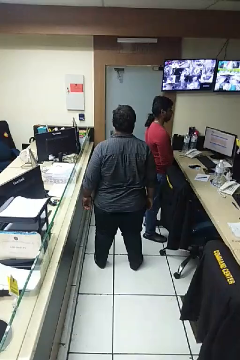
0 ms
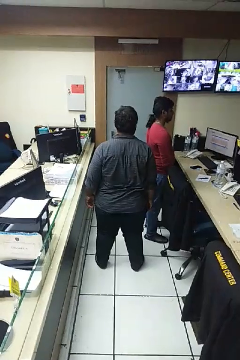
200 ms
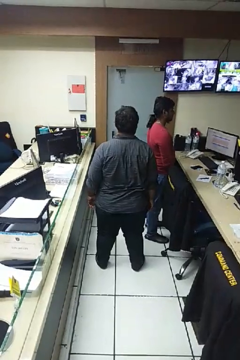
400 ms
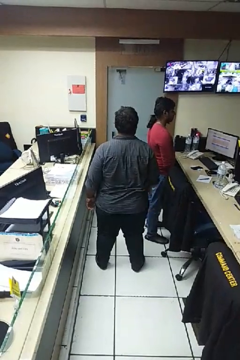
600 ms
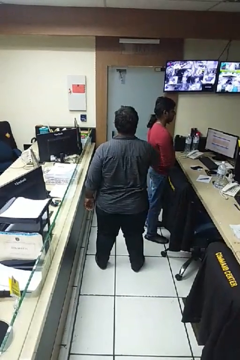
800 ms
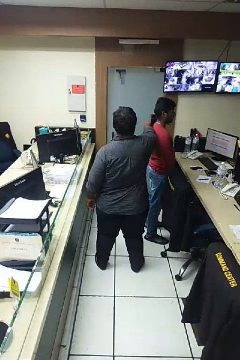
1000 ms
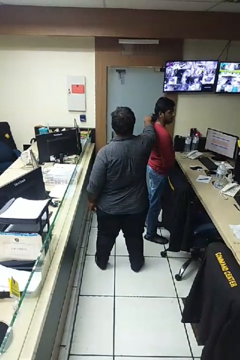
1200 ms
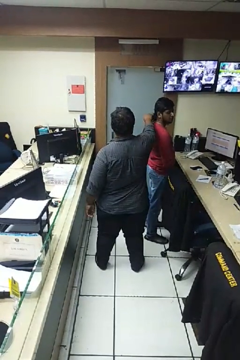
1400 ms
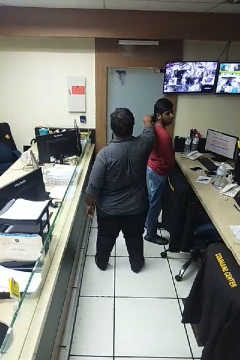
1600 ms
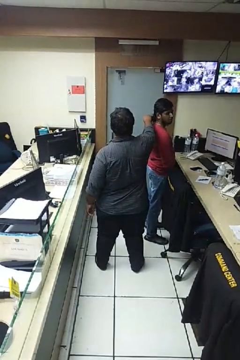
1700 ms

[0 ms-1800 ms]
person grabs person by hair

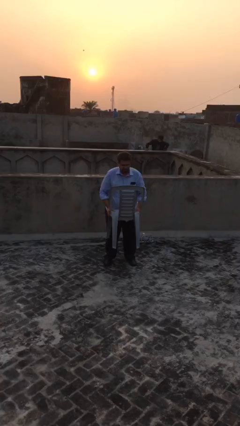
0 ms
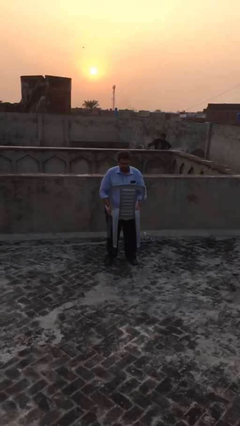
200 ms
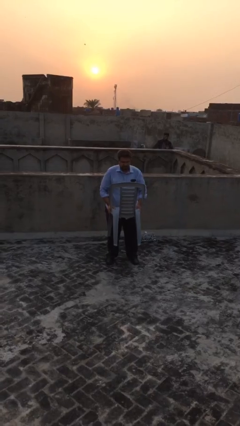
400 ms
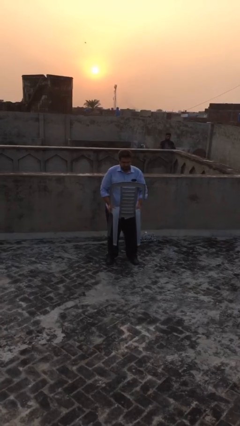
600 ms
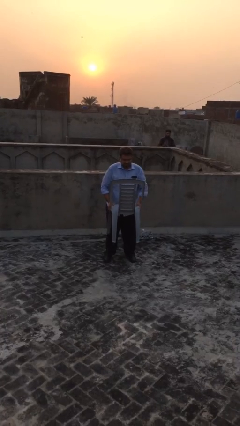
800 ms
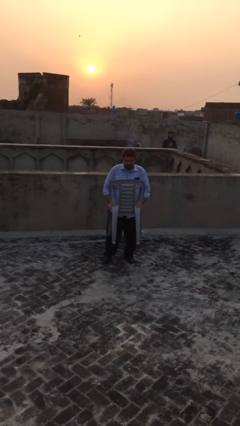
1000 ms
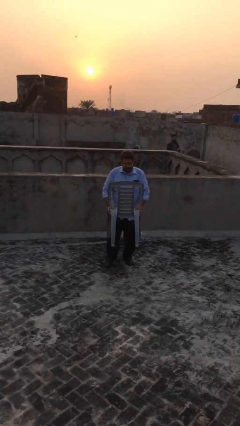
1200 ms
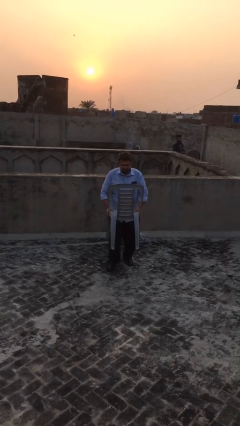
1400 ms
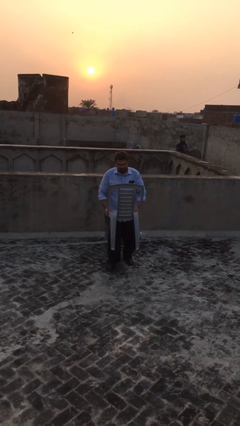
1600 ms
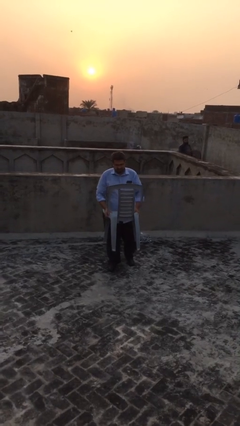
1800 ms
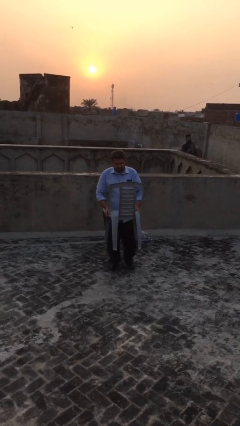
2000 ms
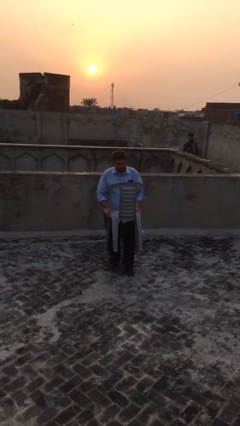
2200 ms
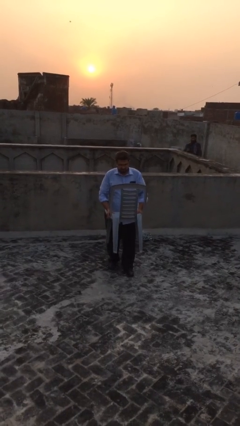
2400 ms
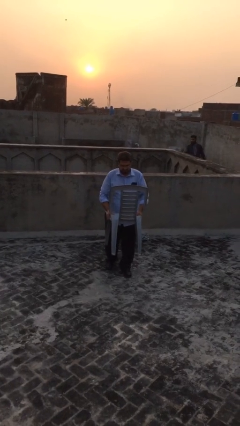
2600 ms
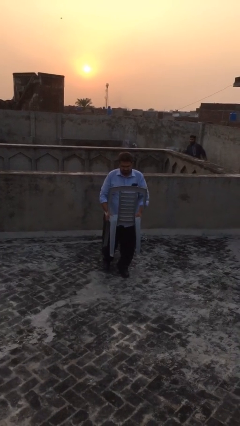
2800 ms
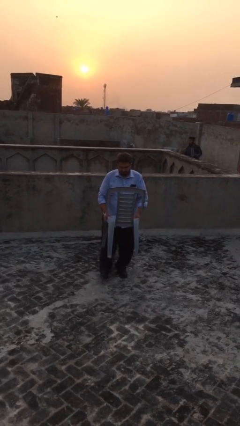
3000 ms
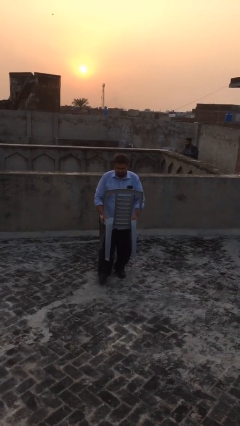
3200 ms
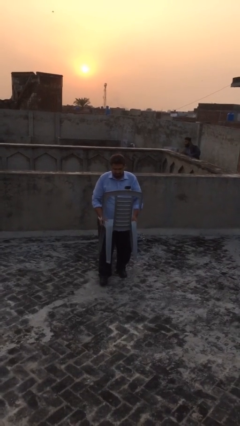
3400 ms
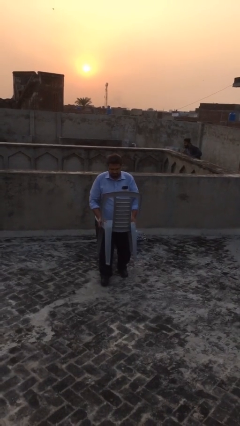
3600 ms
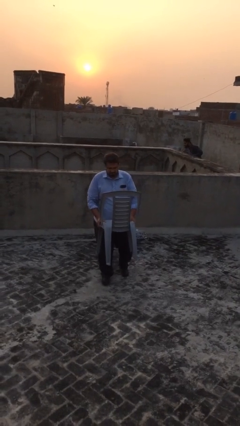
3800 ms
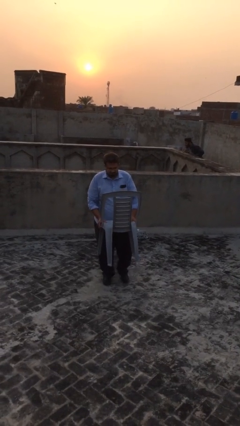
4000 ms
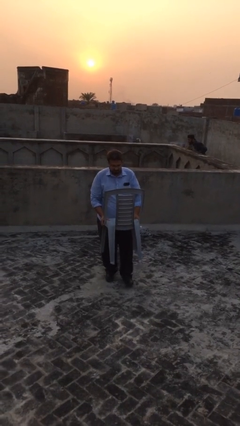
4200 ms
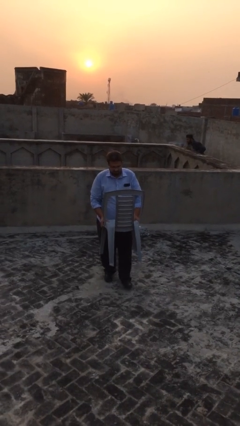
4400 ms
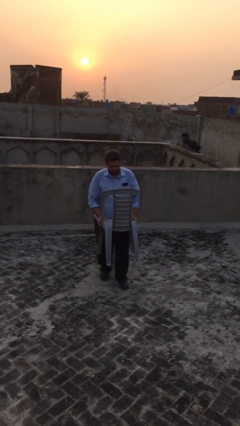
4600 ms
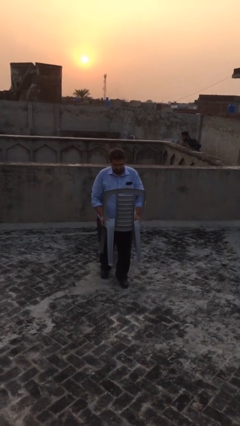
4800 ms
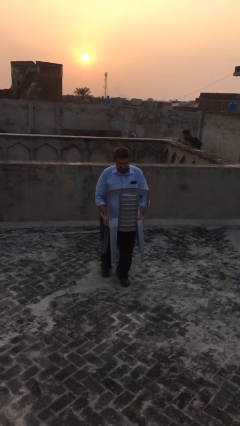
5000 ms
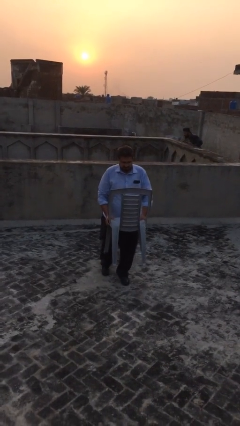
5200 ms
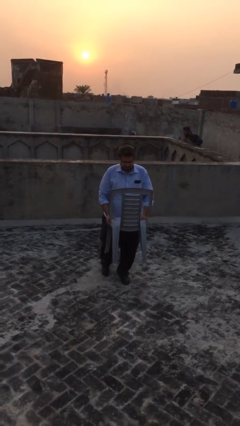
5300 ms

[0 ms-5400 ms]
person carries heavy object

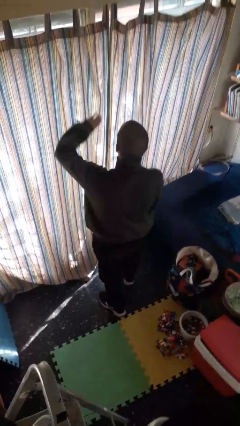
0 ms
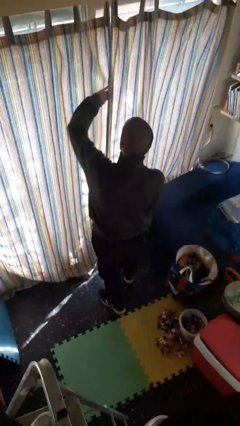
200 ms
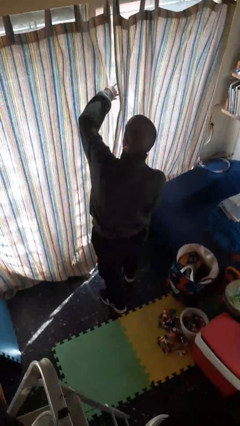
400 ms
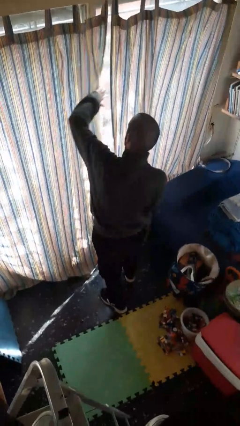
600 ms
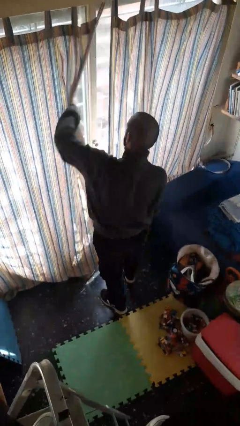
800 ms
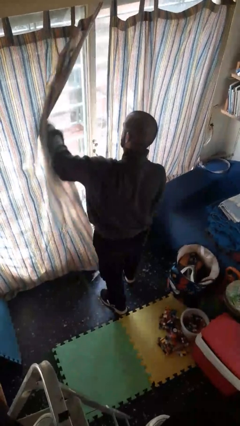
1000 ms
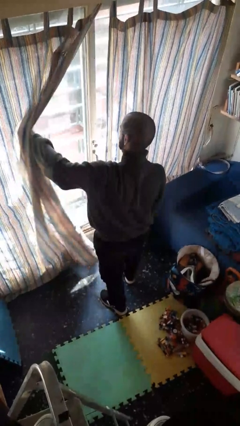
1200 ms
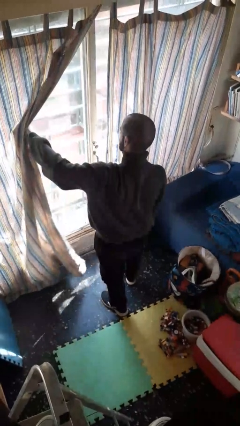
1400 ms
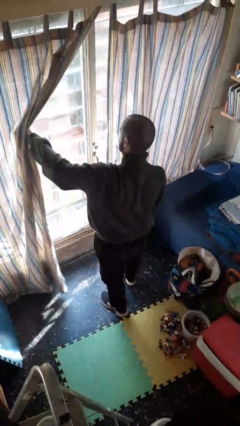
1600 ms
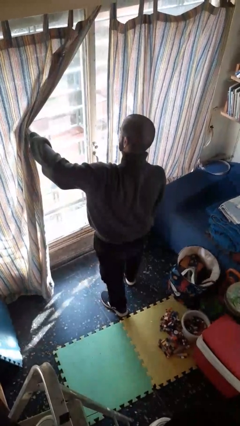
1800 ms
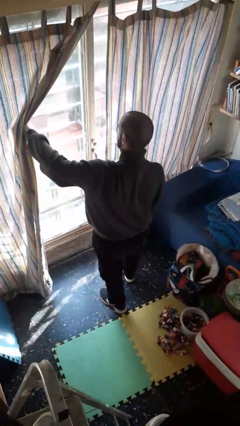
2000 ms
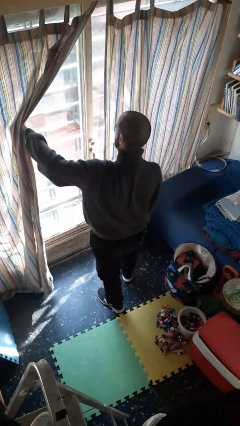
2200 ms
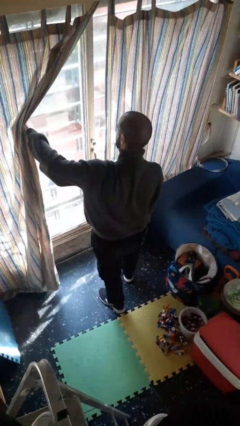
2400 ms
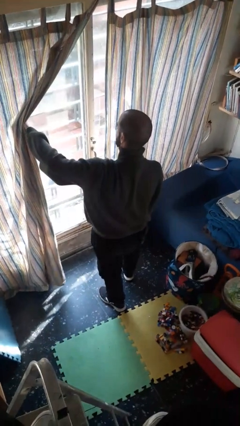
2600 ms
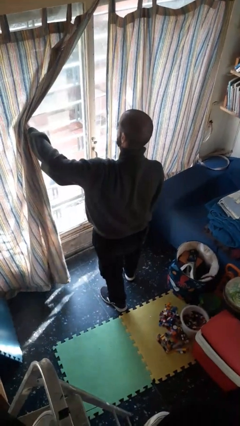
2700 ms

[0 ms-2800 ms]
person opens curtains

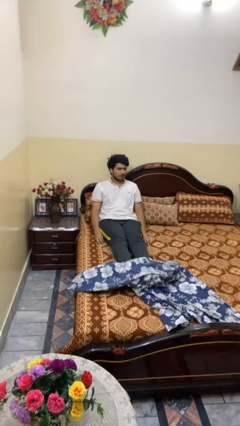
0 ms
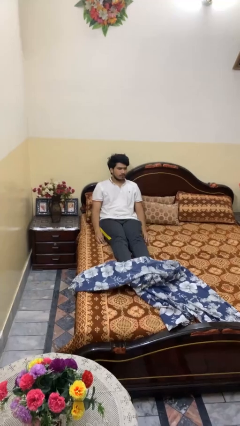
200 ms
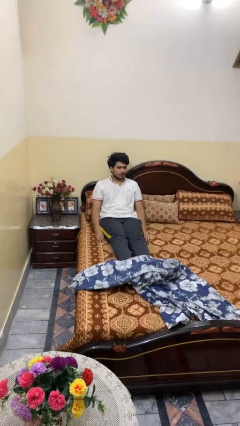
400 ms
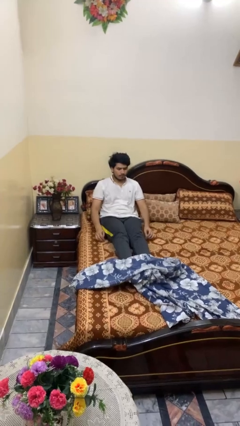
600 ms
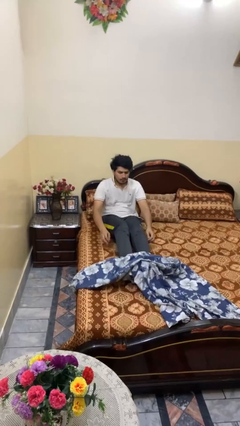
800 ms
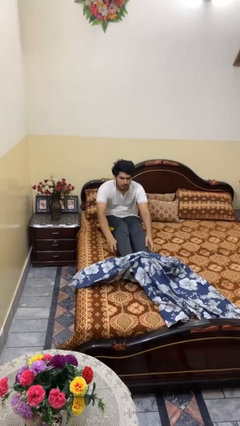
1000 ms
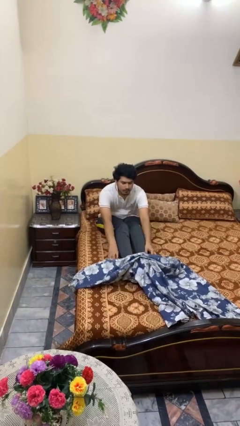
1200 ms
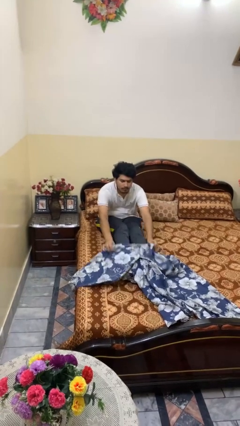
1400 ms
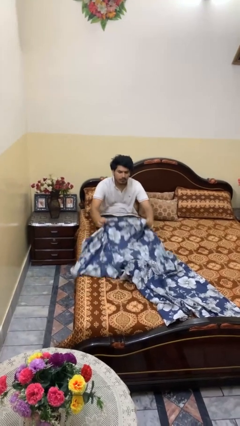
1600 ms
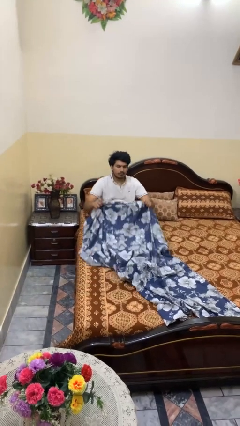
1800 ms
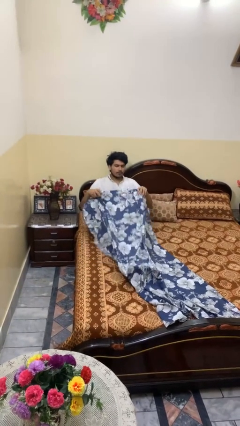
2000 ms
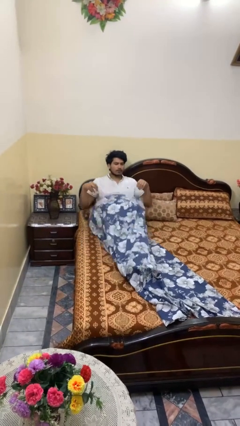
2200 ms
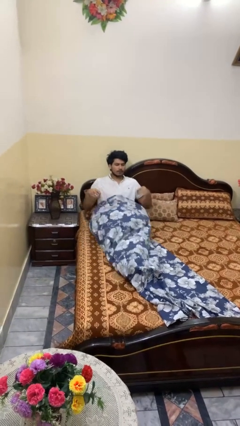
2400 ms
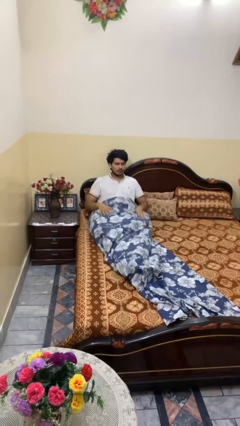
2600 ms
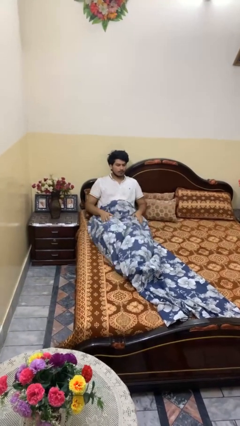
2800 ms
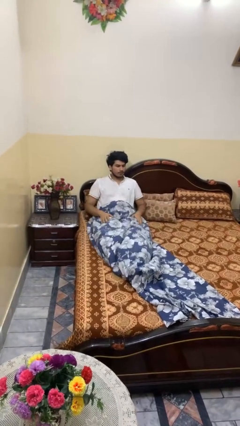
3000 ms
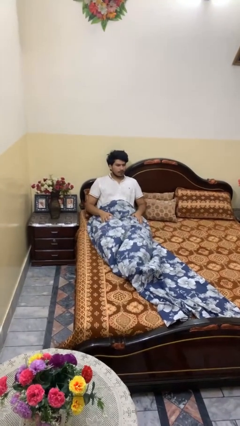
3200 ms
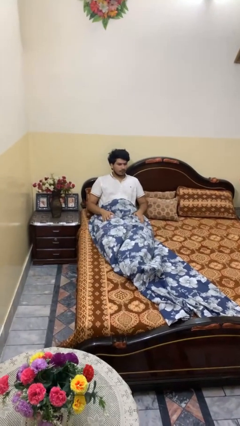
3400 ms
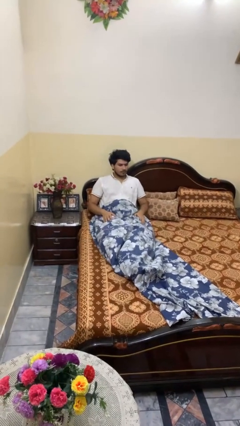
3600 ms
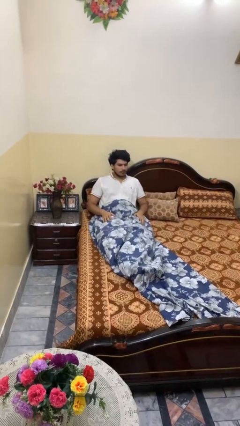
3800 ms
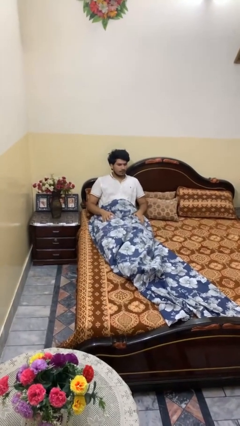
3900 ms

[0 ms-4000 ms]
person covers with bedsheets

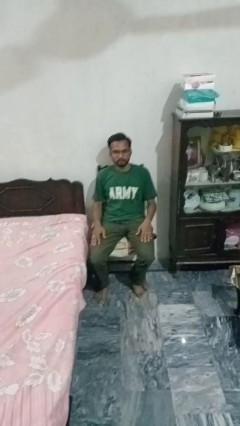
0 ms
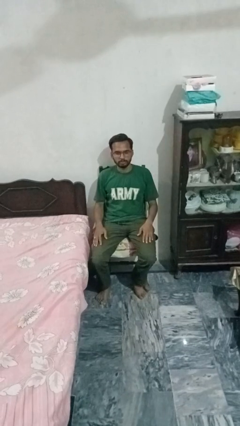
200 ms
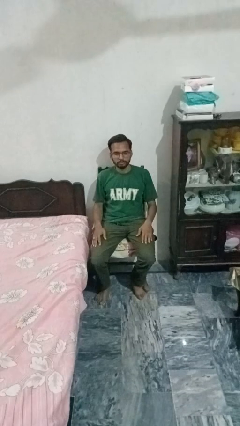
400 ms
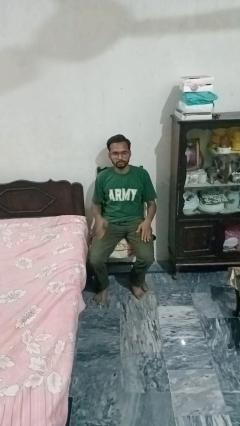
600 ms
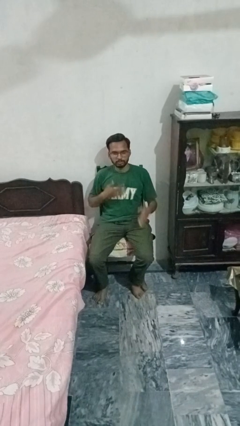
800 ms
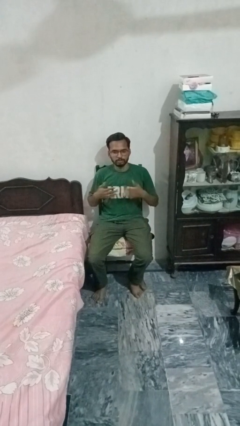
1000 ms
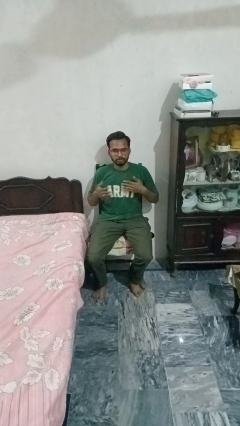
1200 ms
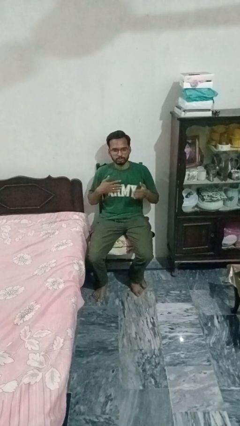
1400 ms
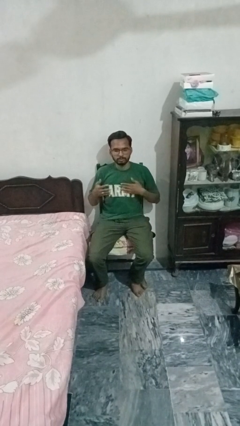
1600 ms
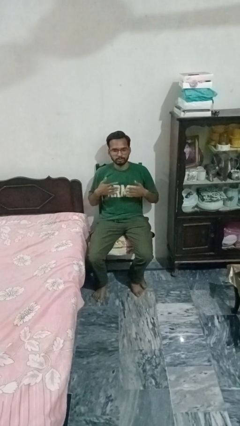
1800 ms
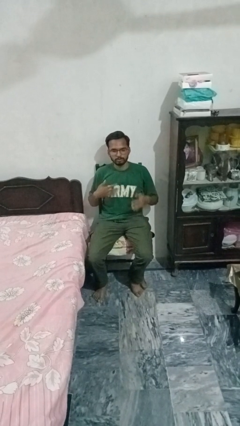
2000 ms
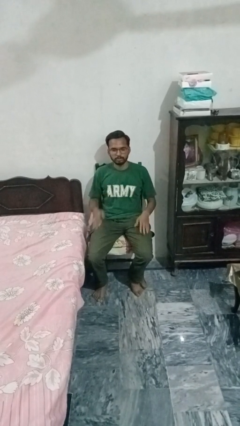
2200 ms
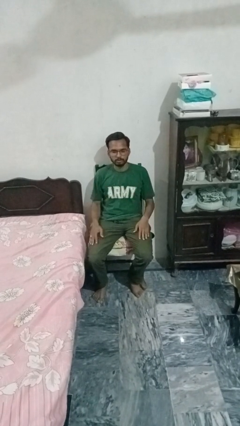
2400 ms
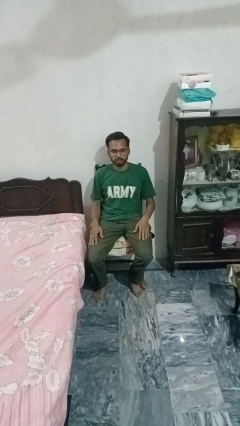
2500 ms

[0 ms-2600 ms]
person drums on chest

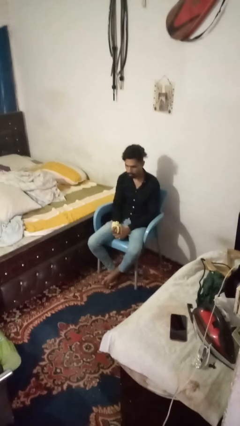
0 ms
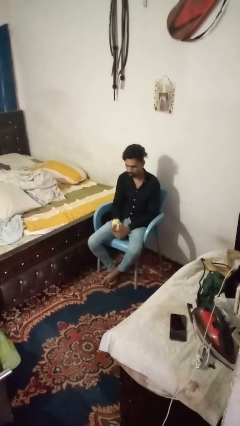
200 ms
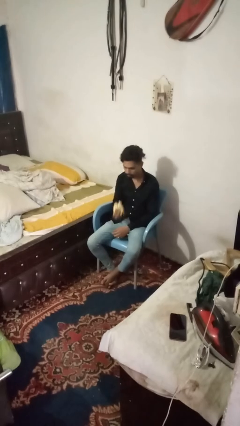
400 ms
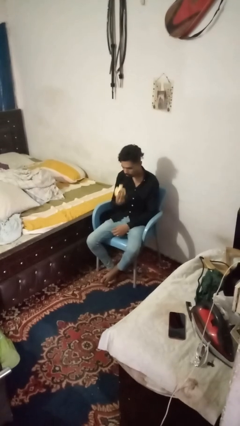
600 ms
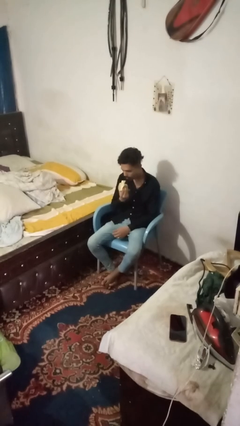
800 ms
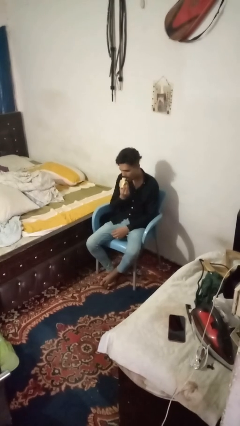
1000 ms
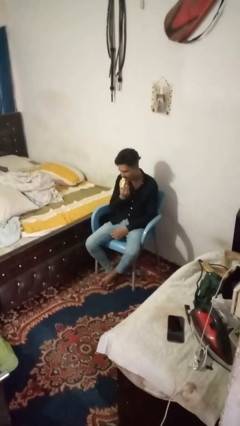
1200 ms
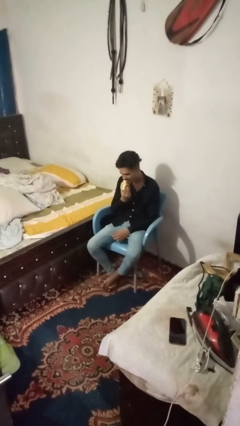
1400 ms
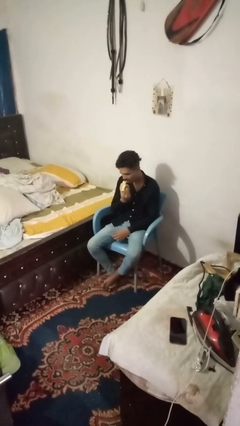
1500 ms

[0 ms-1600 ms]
person eats banana
